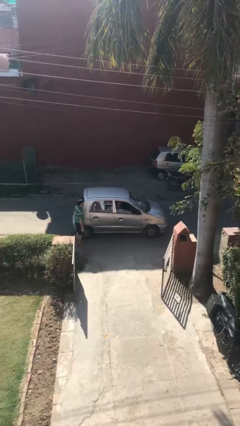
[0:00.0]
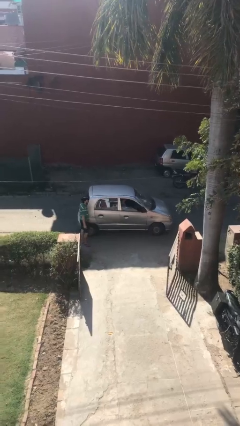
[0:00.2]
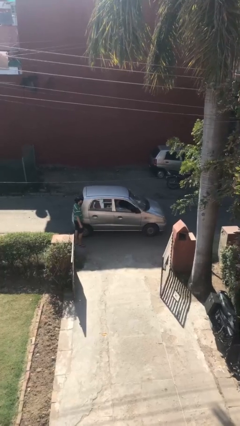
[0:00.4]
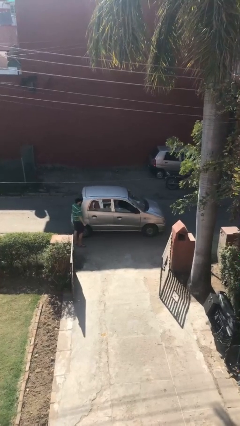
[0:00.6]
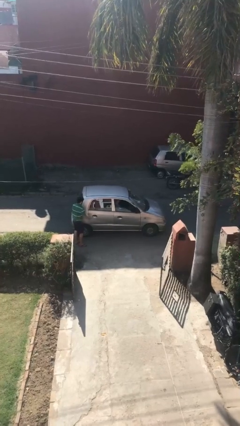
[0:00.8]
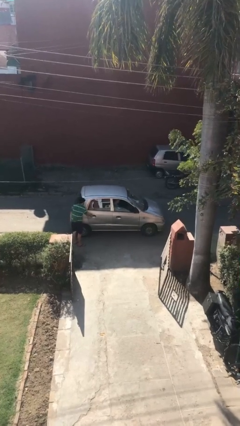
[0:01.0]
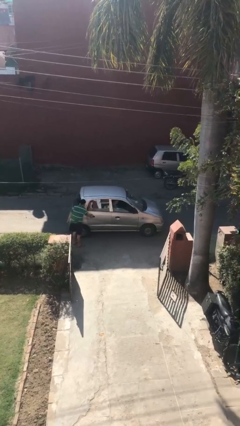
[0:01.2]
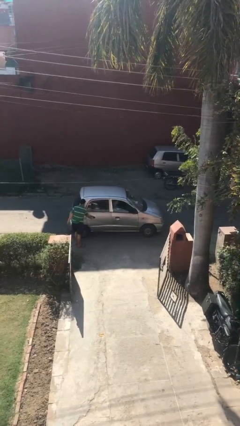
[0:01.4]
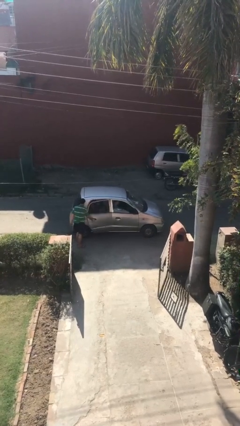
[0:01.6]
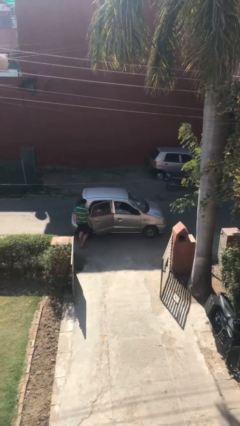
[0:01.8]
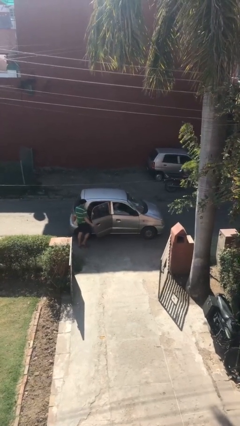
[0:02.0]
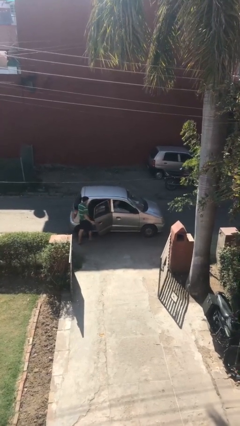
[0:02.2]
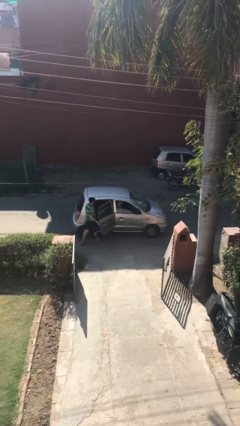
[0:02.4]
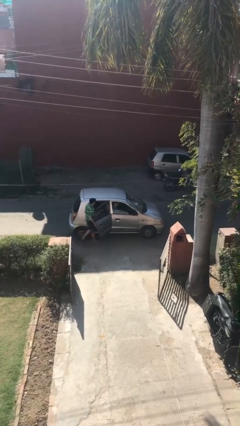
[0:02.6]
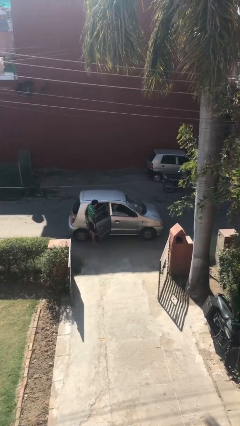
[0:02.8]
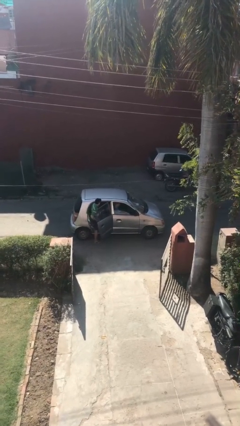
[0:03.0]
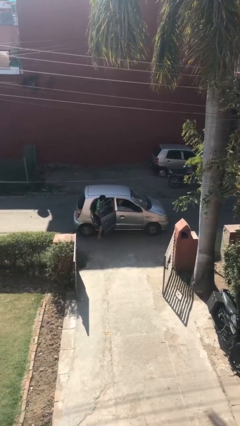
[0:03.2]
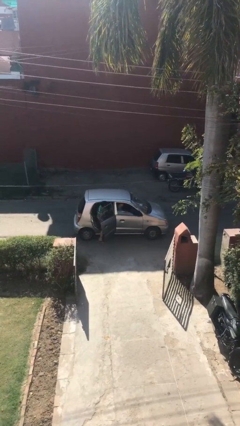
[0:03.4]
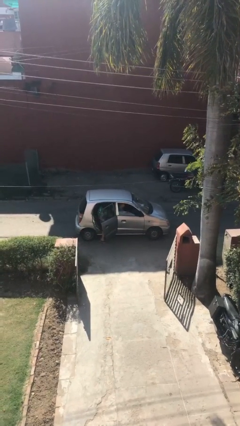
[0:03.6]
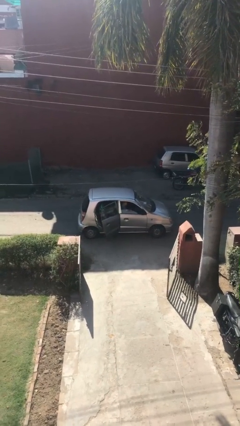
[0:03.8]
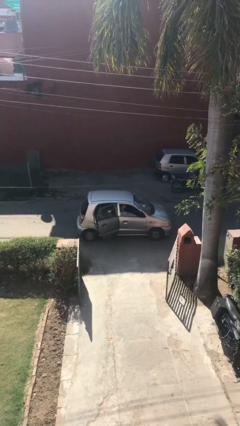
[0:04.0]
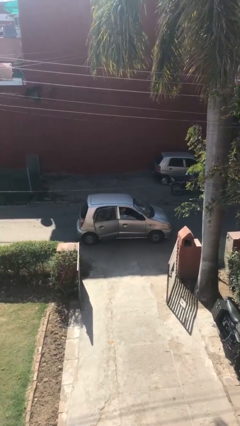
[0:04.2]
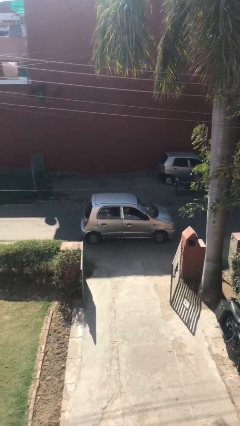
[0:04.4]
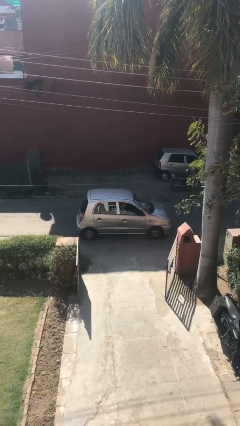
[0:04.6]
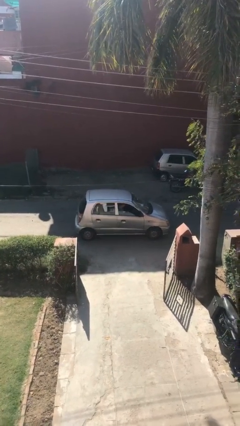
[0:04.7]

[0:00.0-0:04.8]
car picks up person

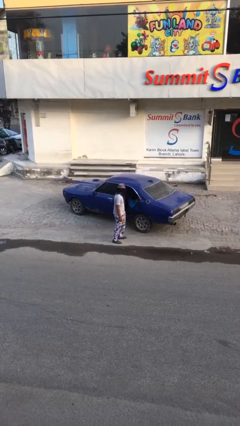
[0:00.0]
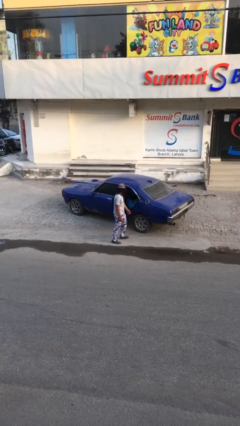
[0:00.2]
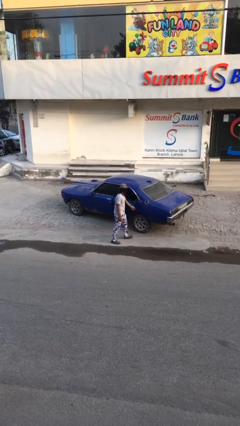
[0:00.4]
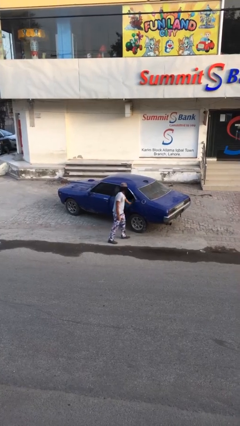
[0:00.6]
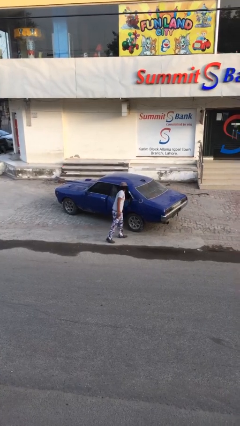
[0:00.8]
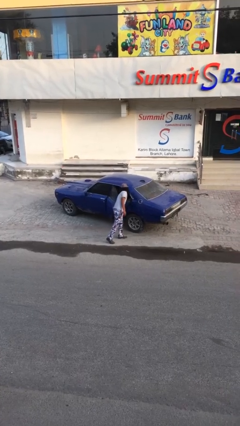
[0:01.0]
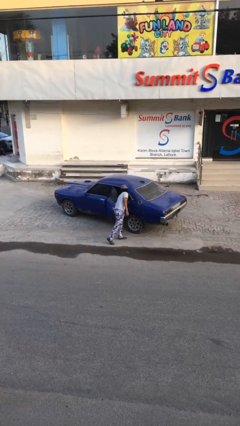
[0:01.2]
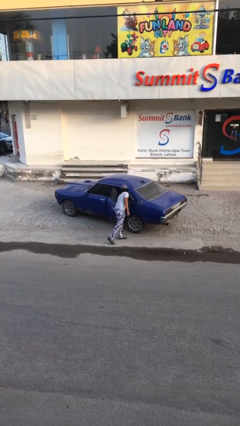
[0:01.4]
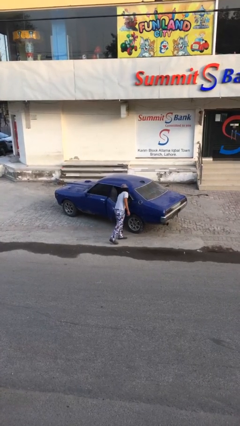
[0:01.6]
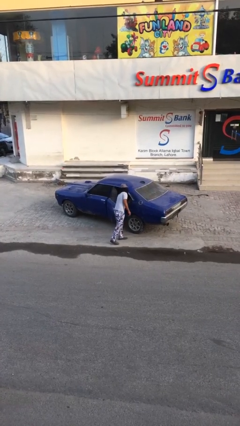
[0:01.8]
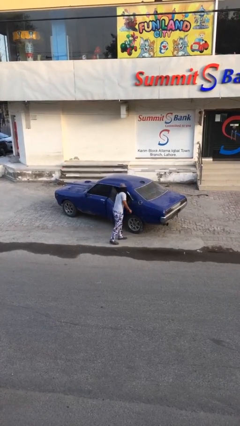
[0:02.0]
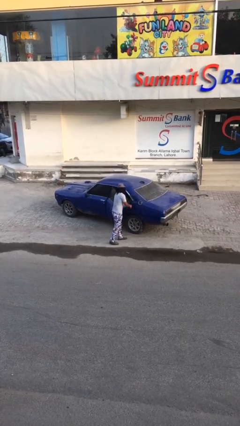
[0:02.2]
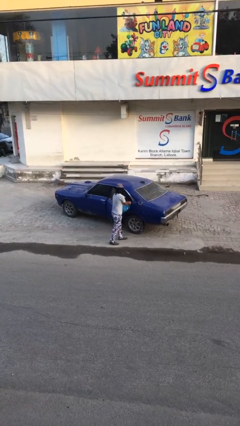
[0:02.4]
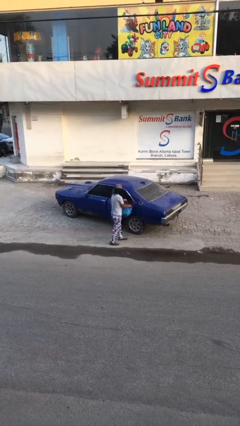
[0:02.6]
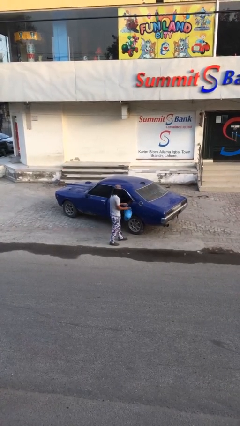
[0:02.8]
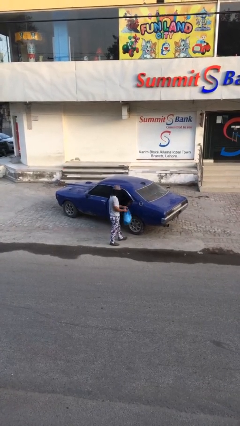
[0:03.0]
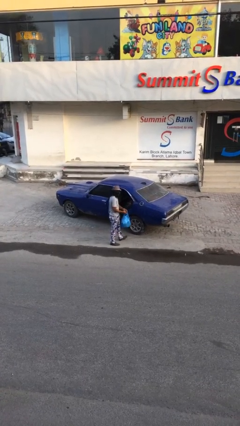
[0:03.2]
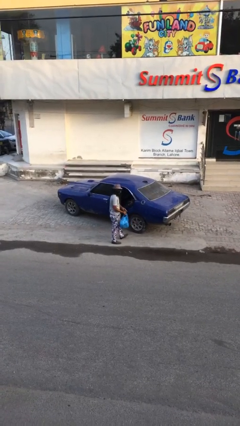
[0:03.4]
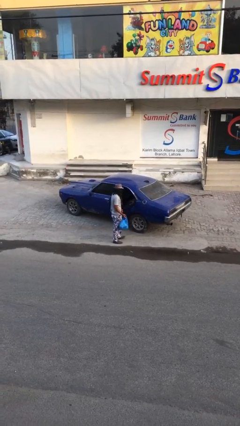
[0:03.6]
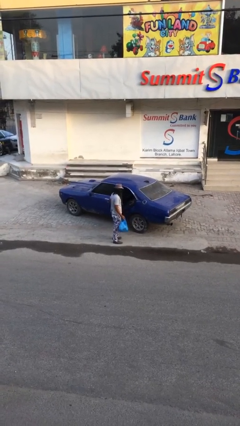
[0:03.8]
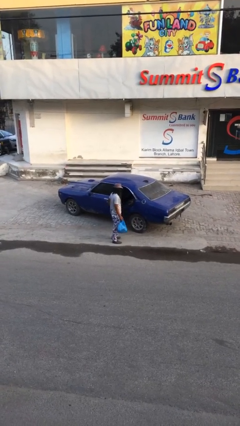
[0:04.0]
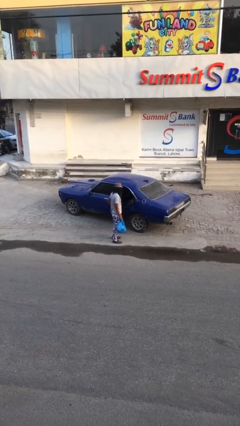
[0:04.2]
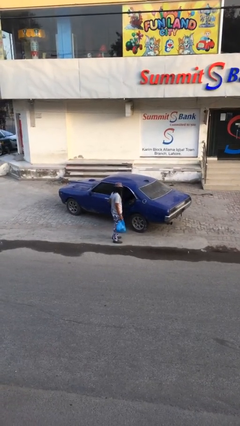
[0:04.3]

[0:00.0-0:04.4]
person unloads car

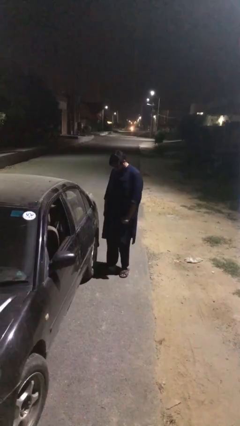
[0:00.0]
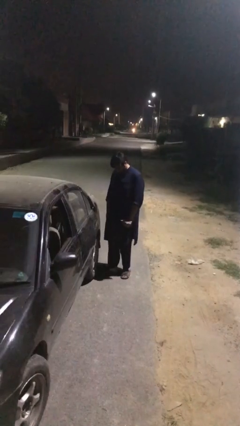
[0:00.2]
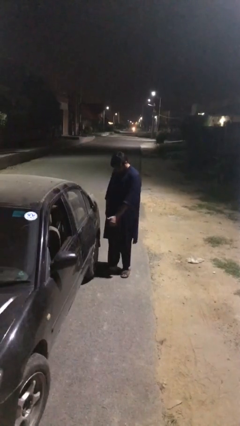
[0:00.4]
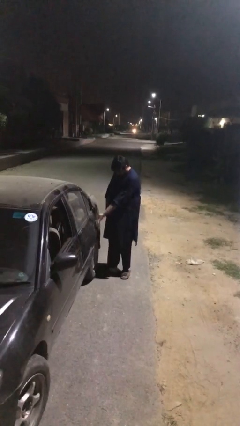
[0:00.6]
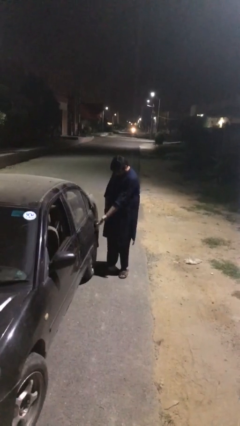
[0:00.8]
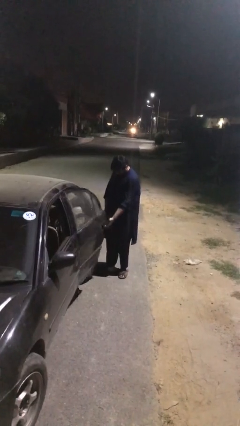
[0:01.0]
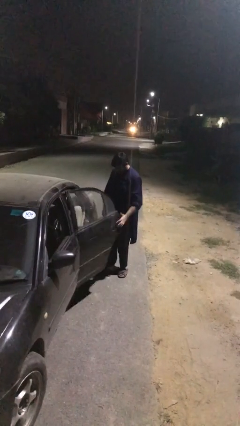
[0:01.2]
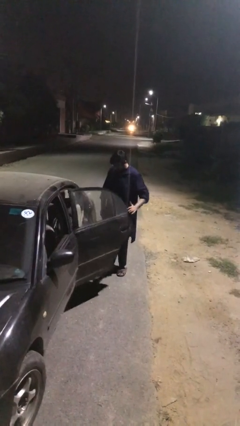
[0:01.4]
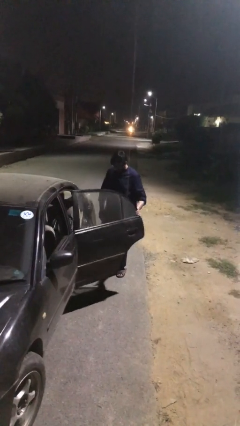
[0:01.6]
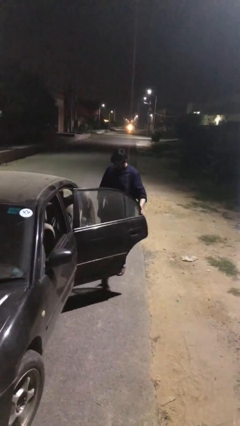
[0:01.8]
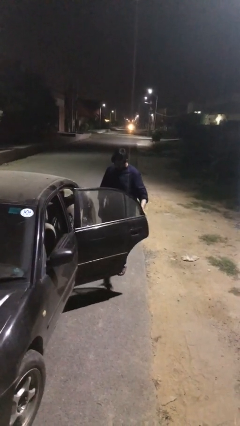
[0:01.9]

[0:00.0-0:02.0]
person opens car door

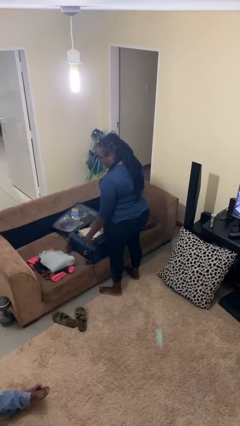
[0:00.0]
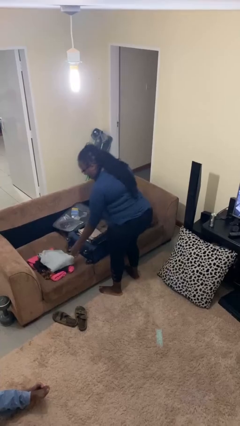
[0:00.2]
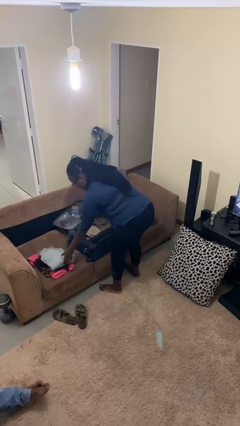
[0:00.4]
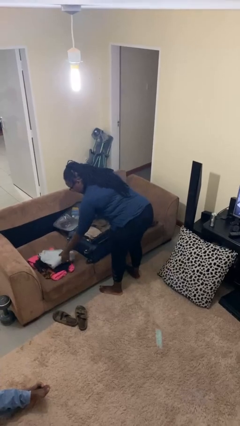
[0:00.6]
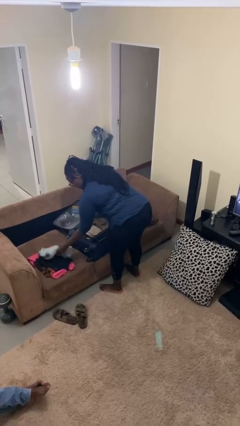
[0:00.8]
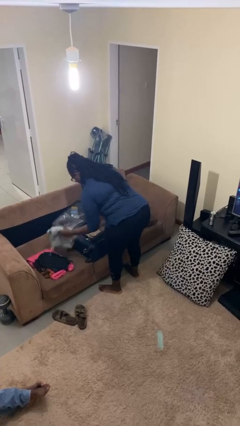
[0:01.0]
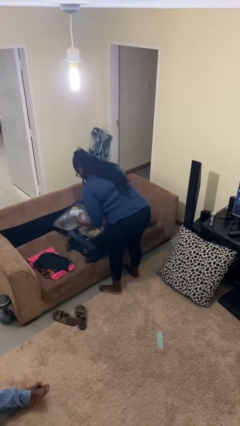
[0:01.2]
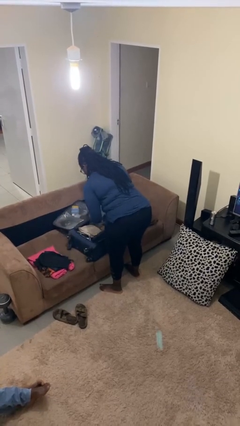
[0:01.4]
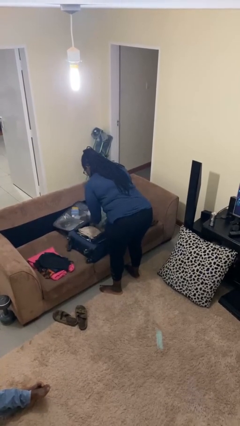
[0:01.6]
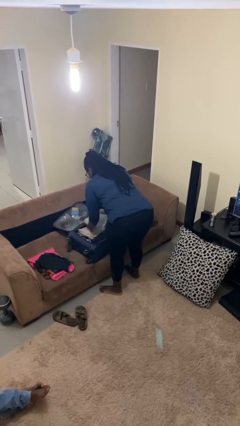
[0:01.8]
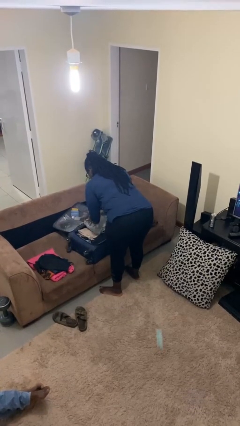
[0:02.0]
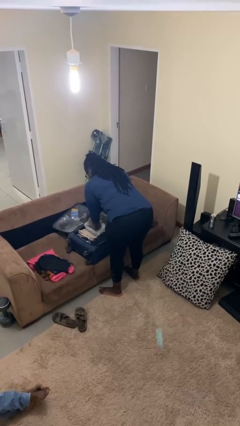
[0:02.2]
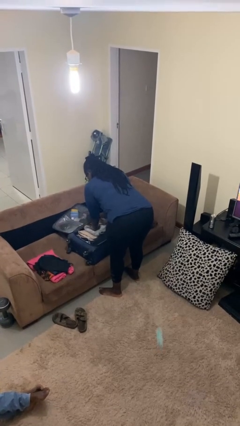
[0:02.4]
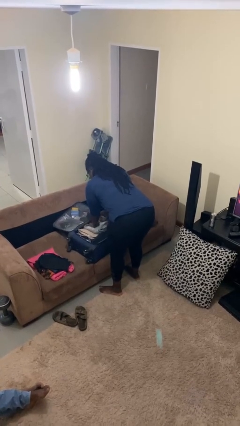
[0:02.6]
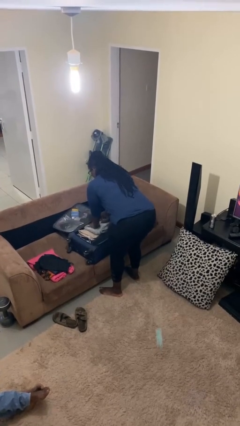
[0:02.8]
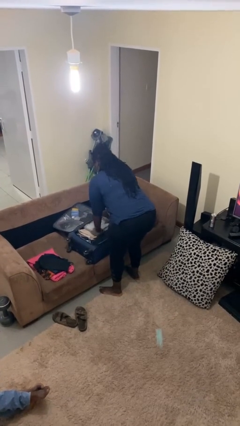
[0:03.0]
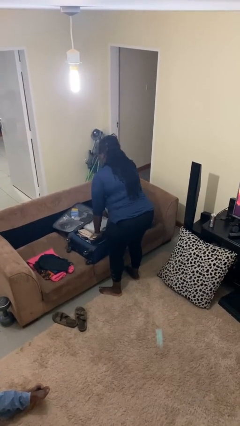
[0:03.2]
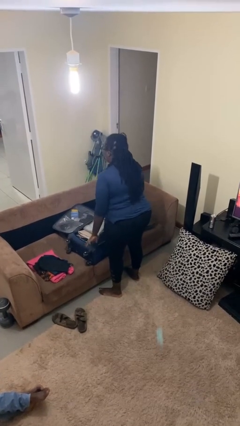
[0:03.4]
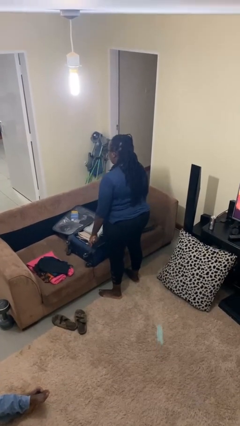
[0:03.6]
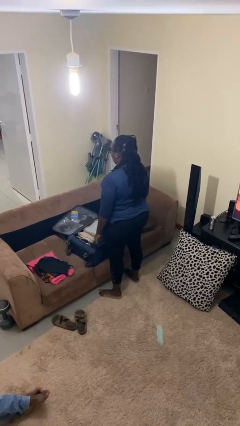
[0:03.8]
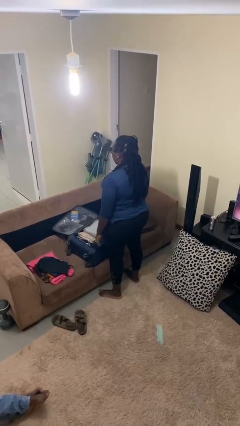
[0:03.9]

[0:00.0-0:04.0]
person loads clothes into suitcase

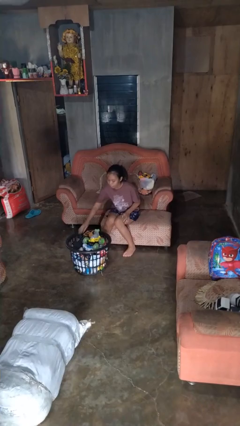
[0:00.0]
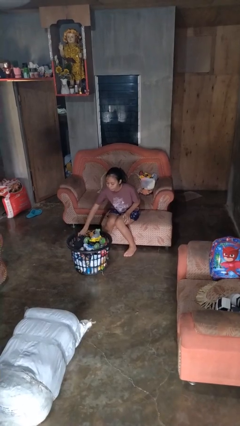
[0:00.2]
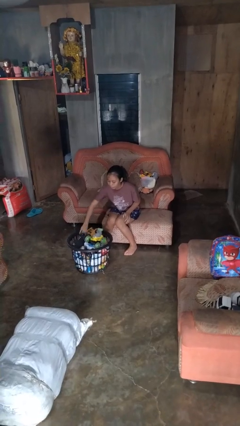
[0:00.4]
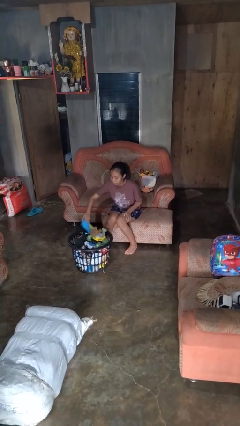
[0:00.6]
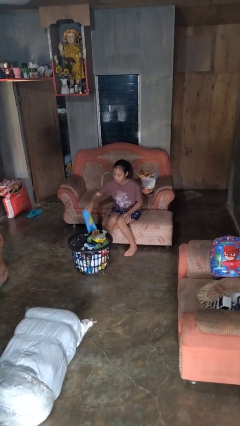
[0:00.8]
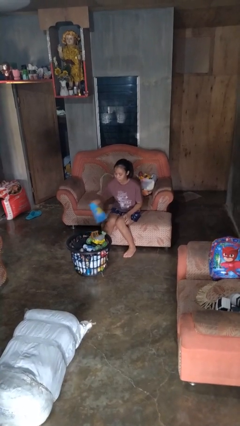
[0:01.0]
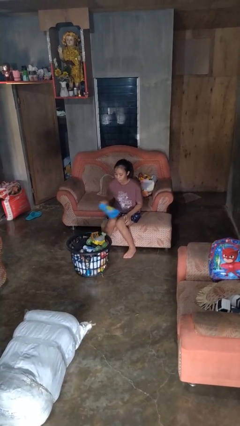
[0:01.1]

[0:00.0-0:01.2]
person takes object from basket

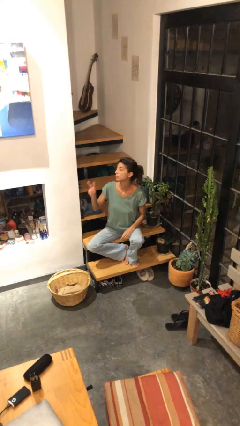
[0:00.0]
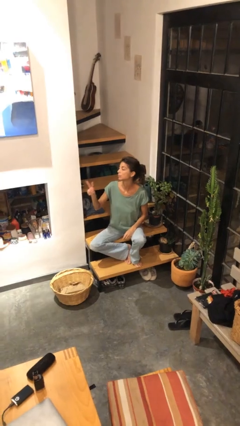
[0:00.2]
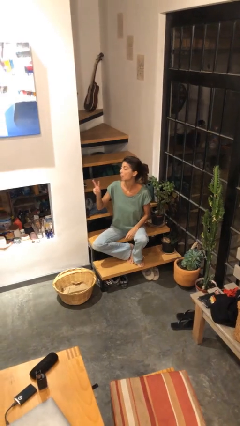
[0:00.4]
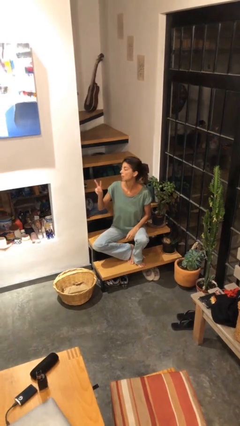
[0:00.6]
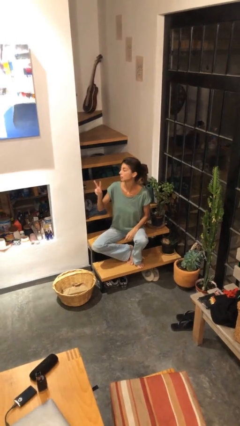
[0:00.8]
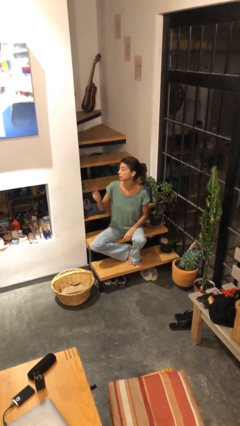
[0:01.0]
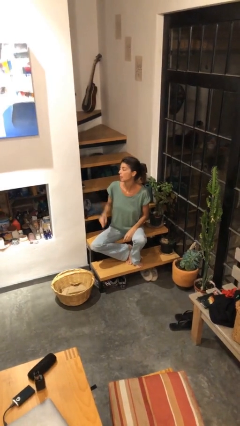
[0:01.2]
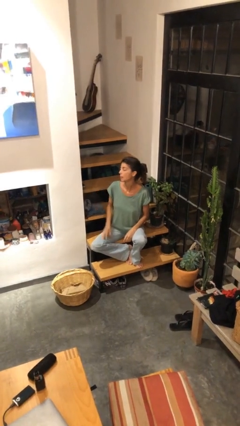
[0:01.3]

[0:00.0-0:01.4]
person gestures peace
